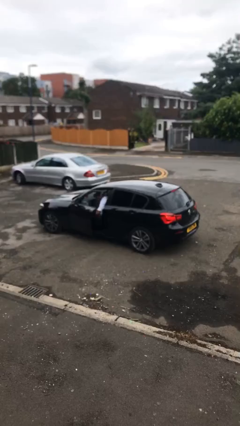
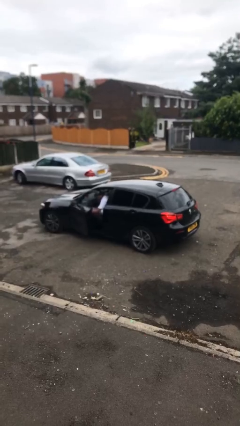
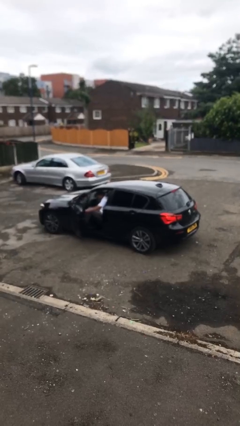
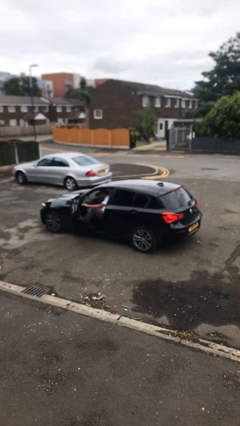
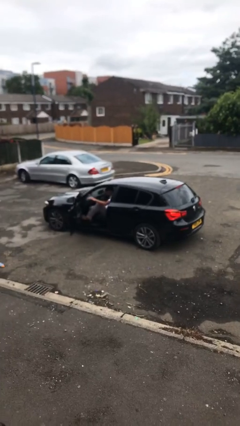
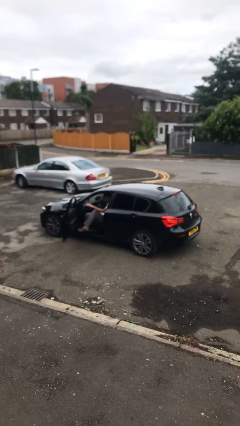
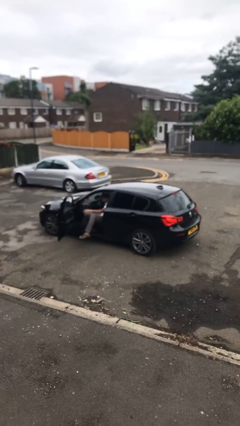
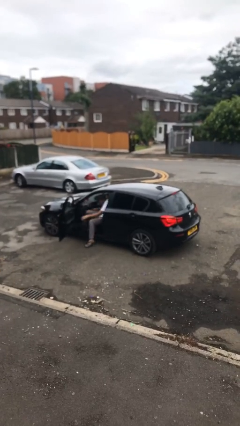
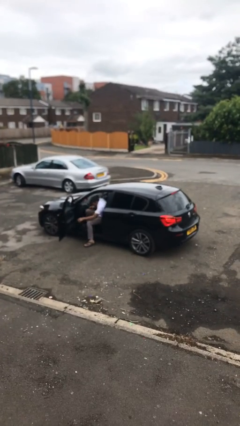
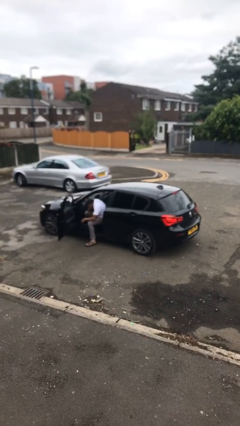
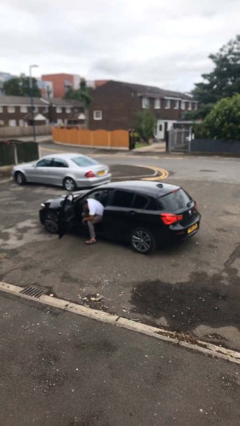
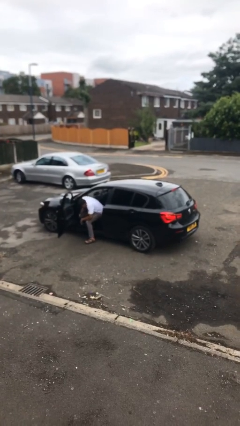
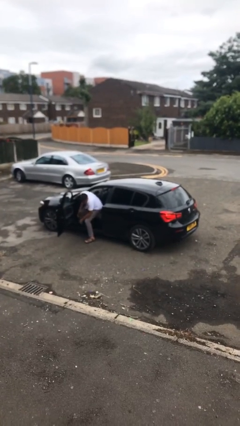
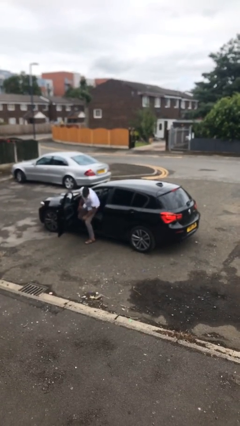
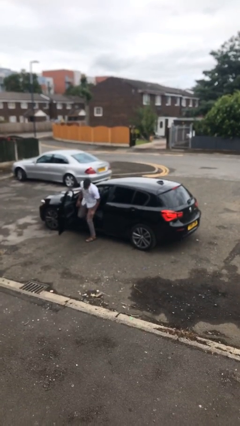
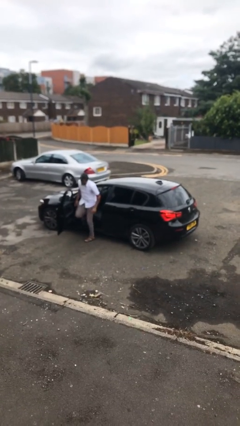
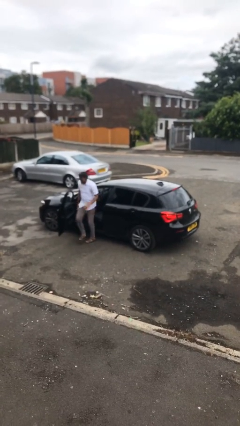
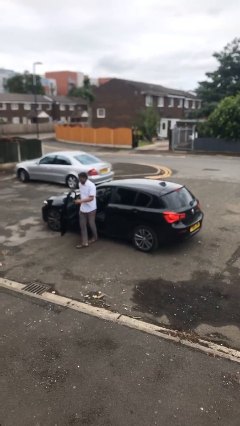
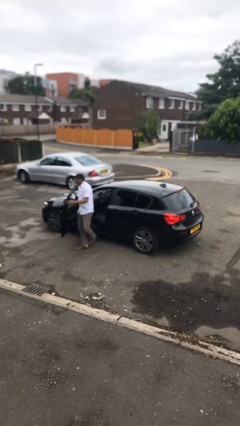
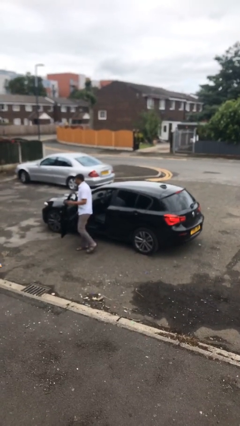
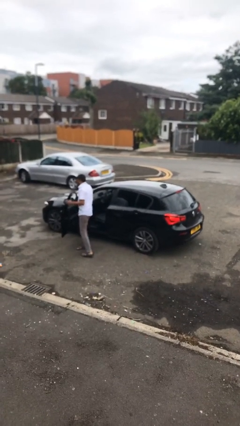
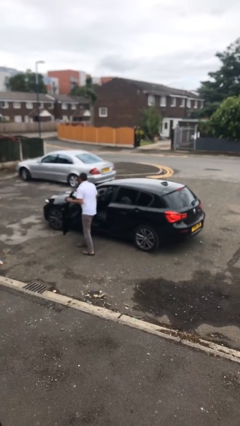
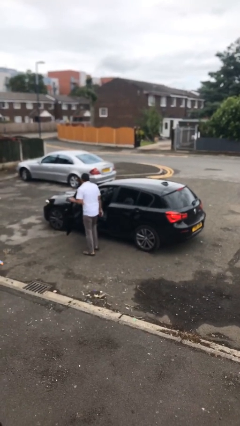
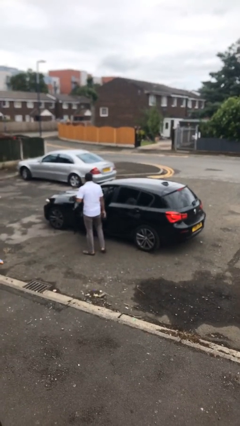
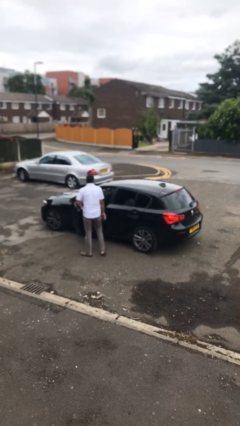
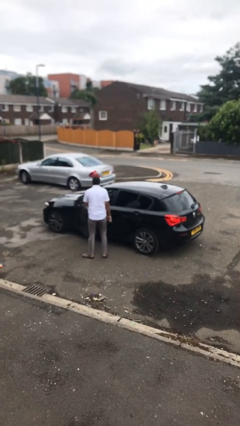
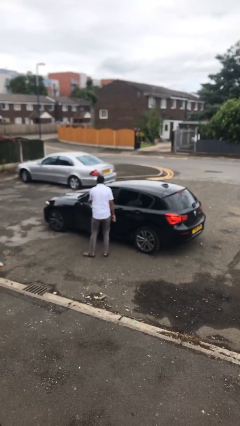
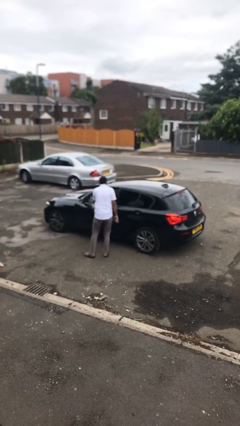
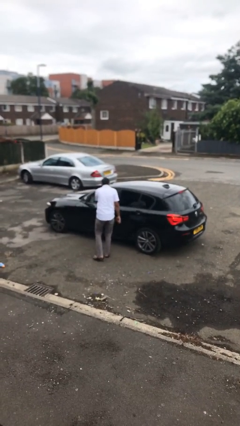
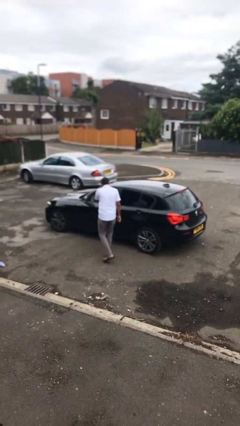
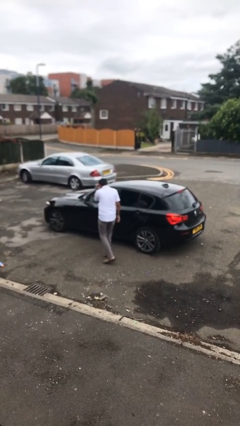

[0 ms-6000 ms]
car drops off person

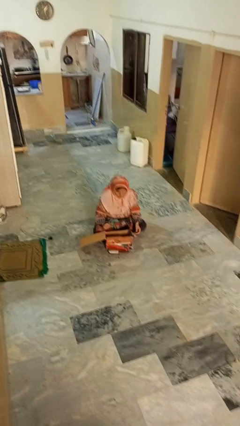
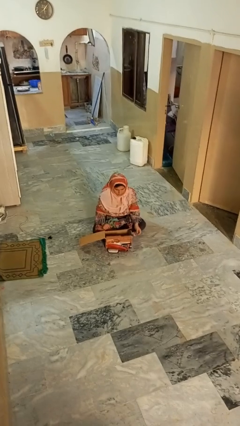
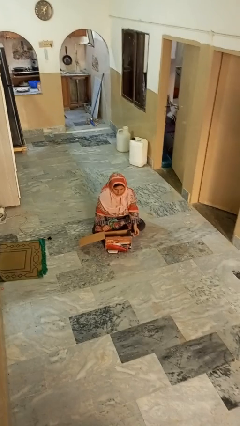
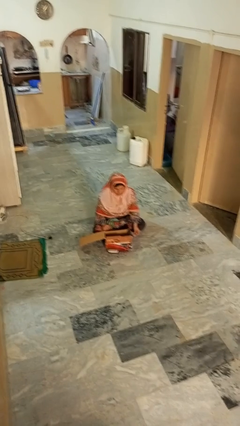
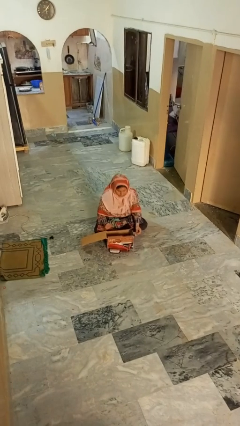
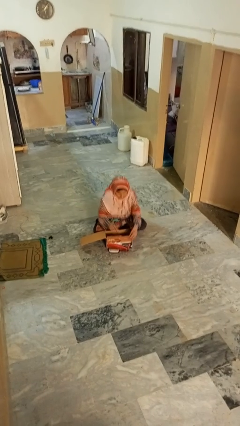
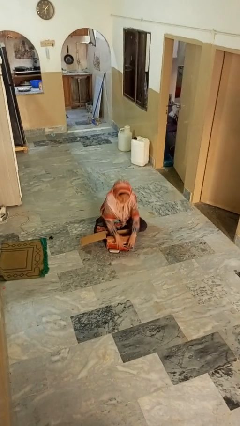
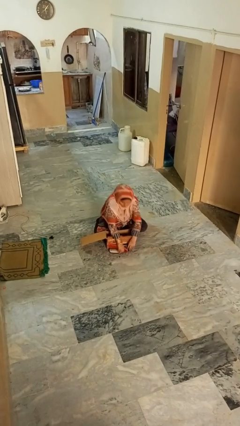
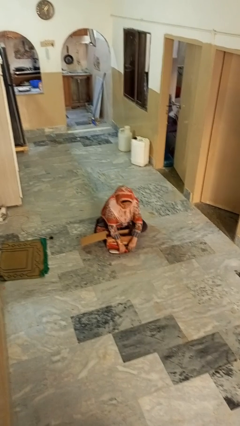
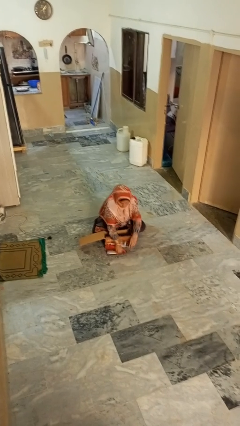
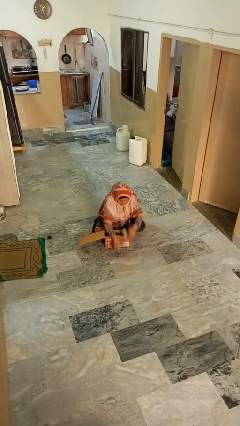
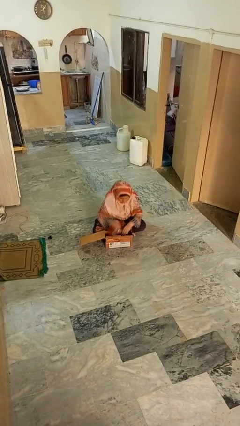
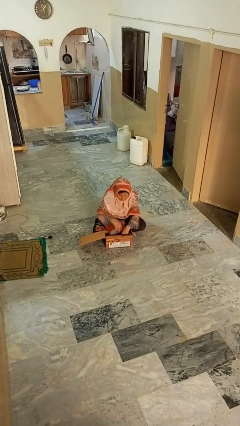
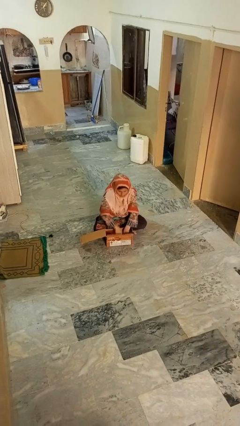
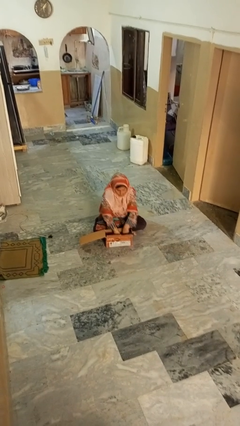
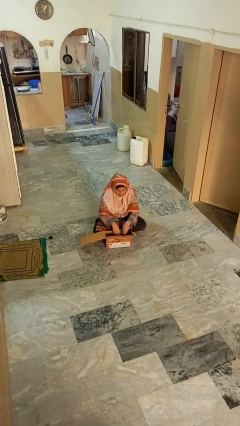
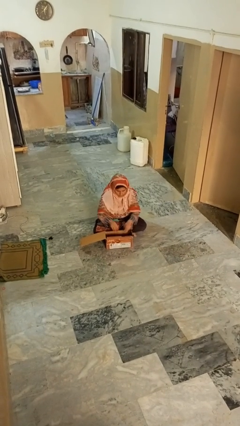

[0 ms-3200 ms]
person puts object into box

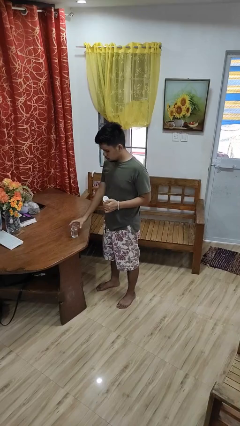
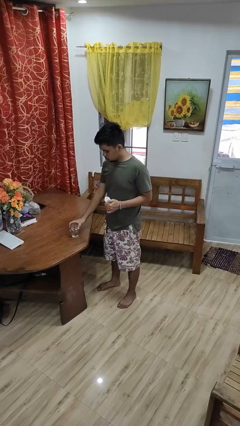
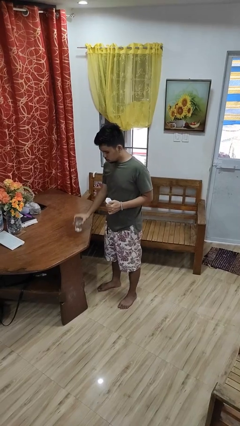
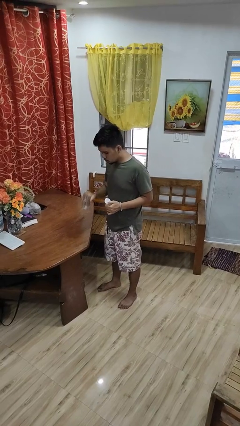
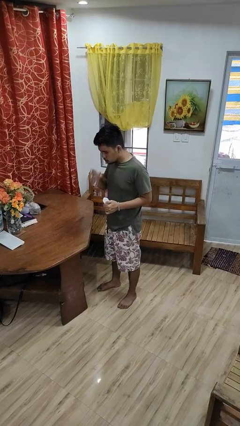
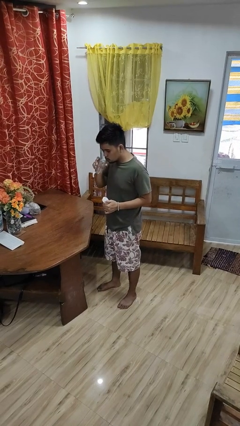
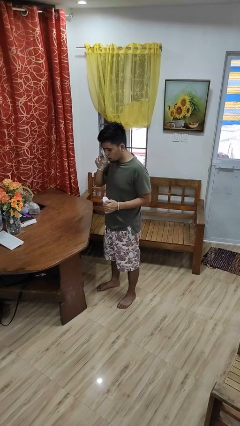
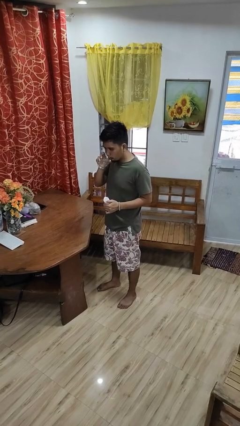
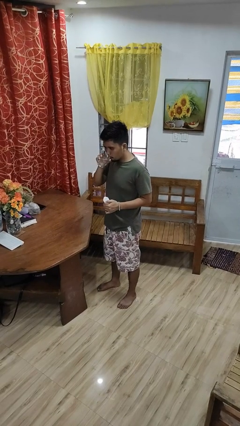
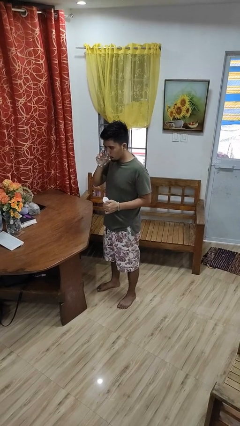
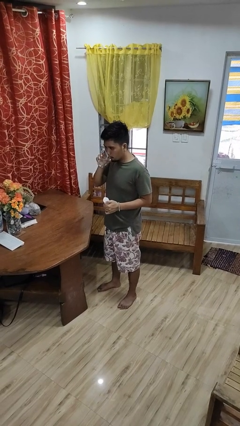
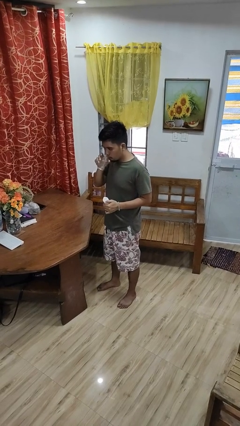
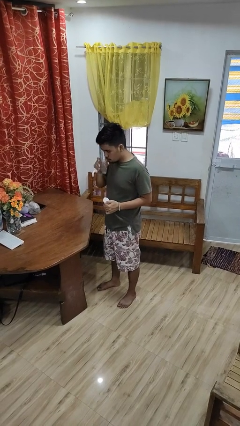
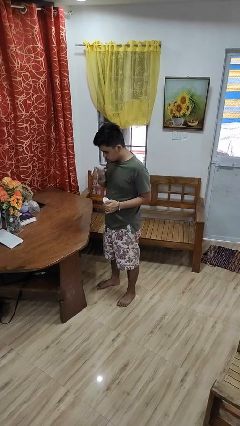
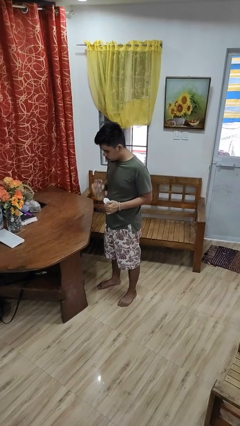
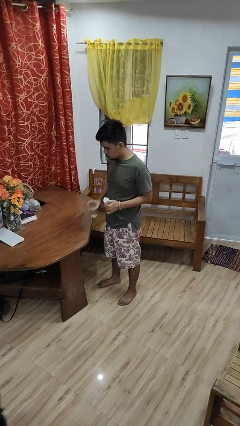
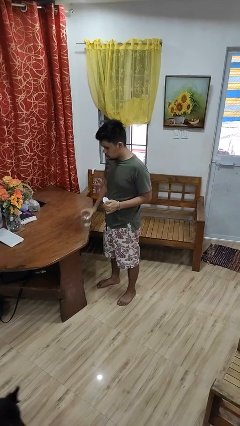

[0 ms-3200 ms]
person drinks from cup

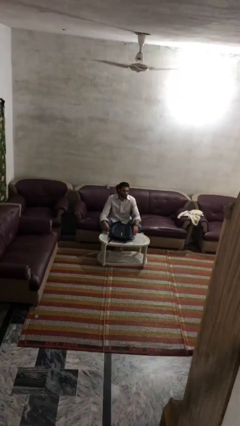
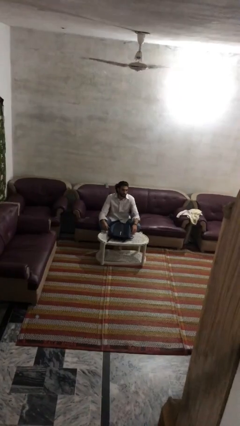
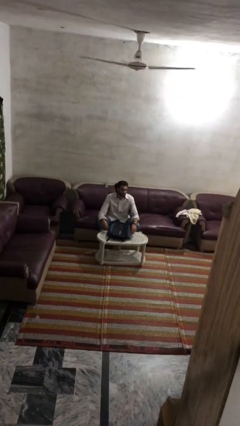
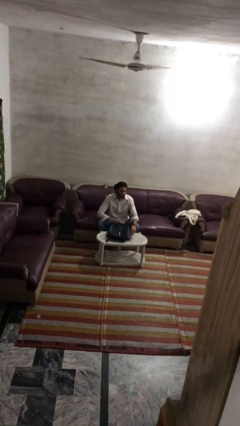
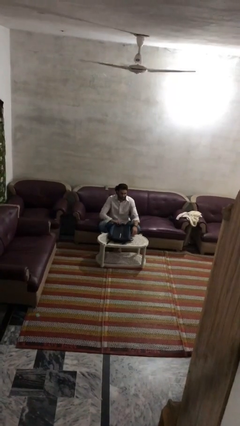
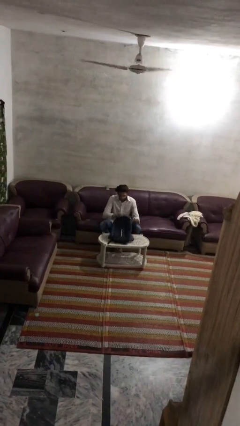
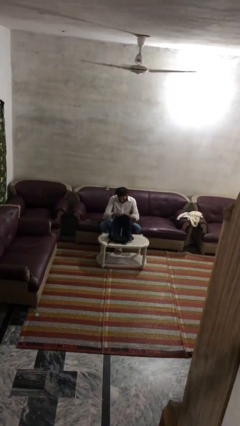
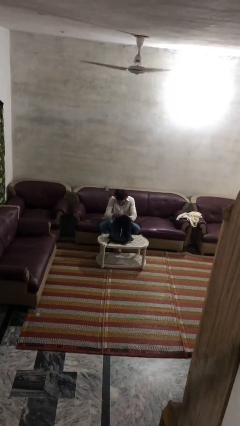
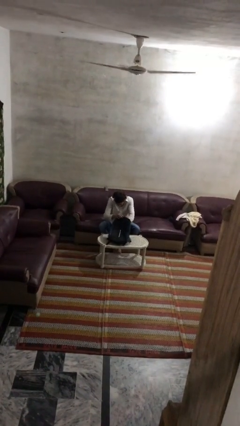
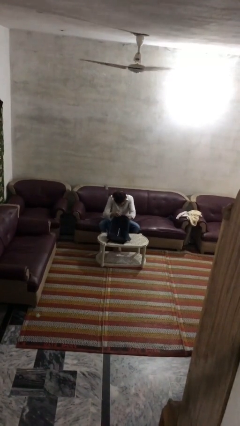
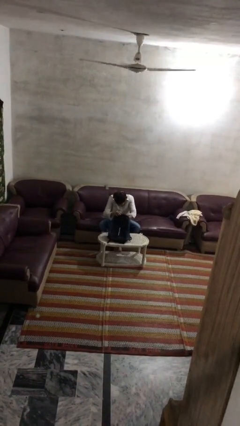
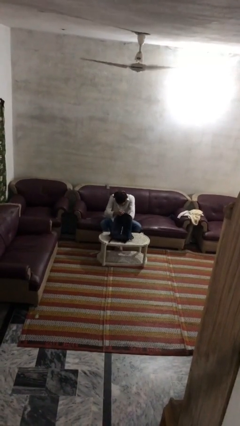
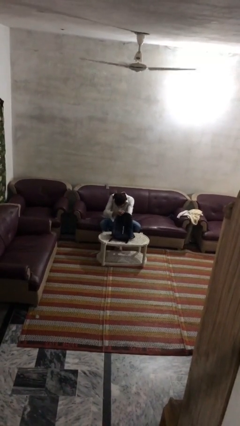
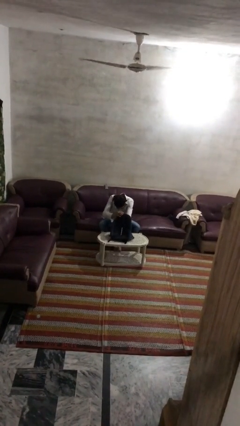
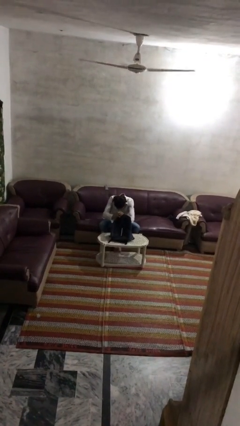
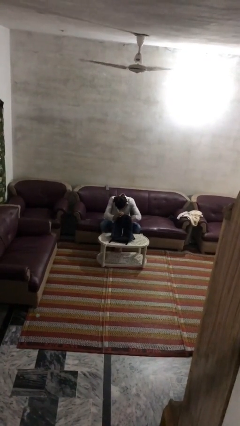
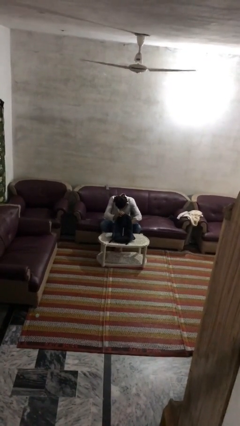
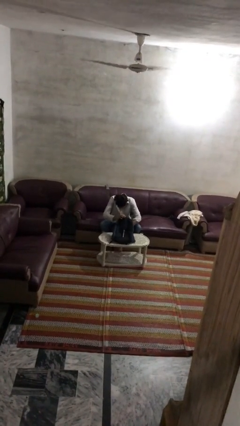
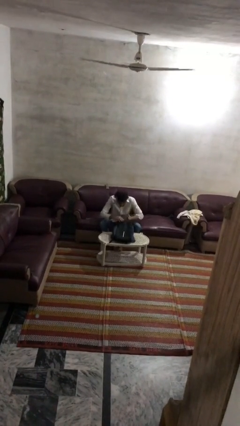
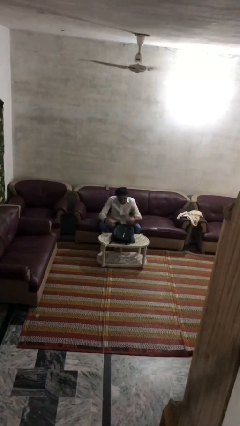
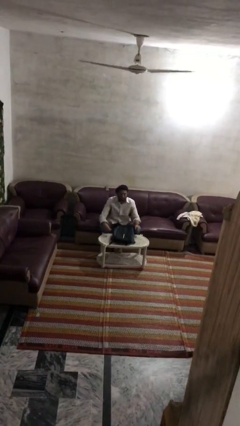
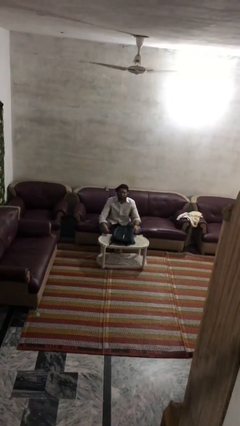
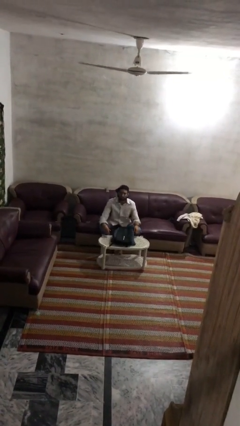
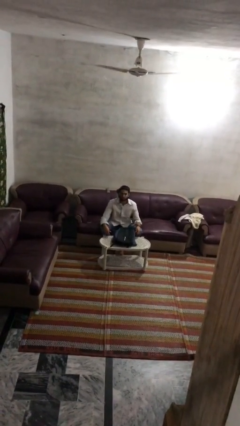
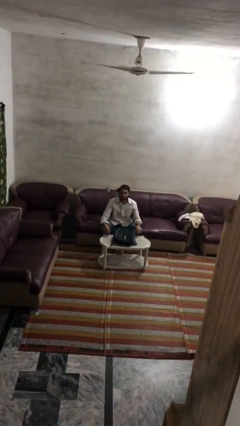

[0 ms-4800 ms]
person searches in bag

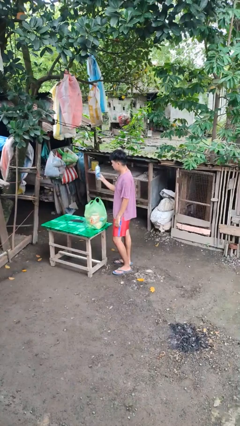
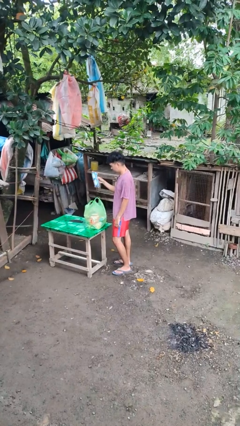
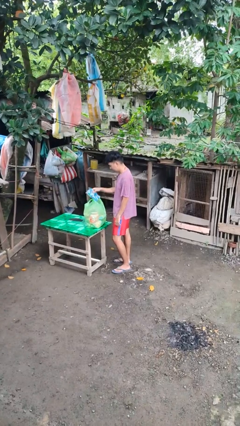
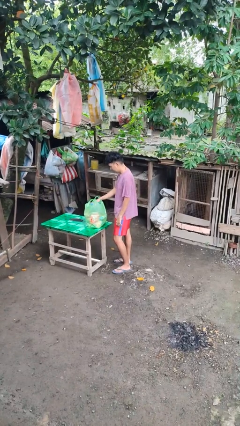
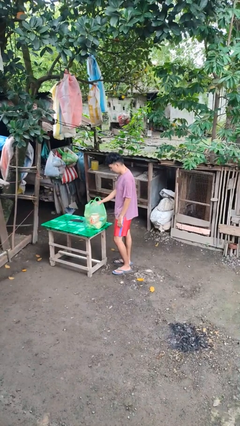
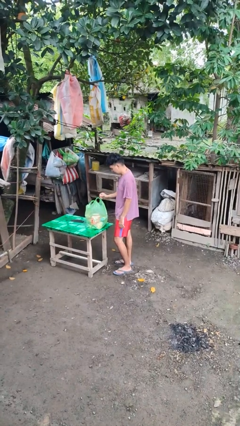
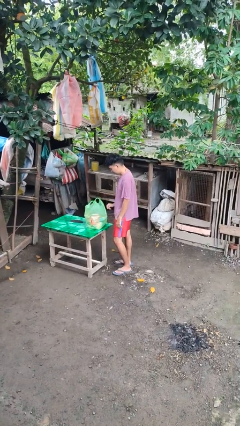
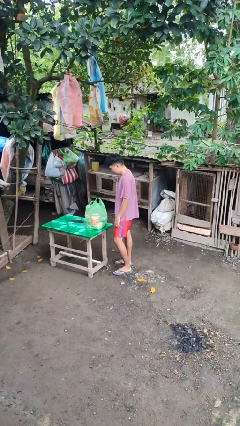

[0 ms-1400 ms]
person puts object into bag
